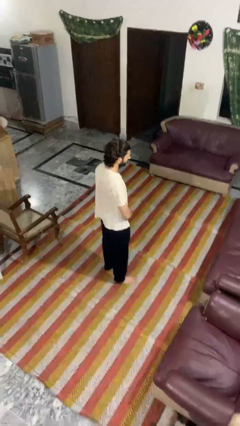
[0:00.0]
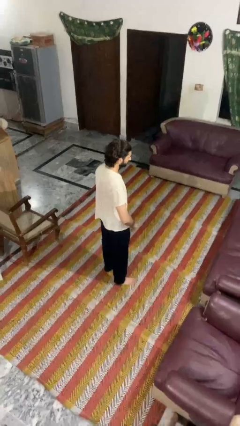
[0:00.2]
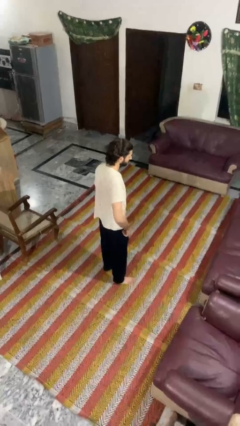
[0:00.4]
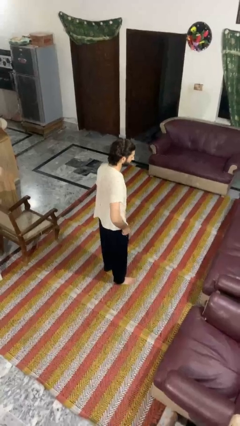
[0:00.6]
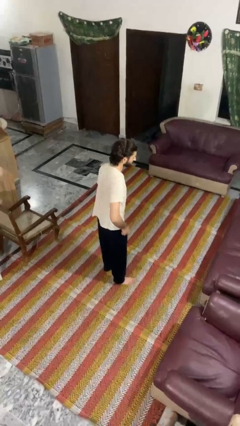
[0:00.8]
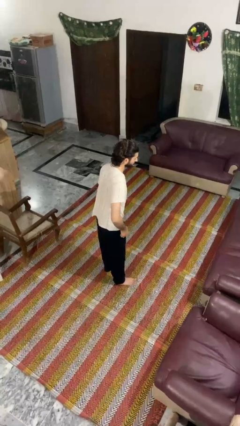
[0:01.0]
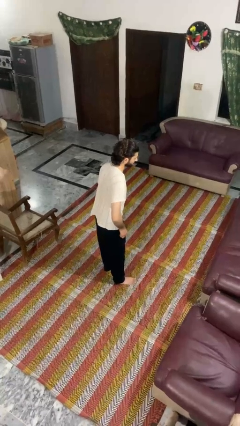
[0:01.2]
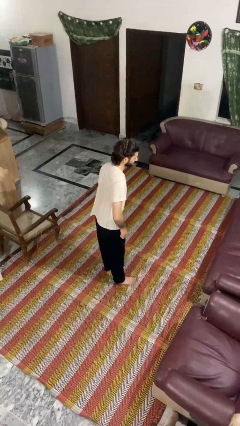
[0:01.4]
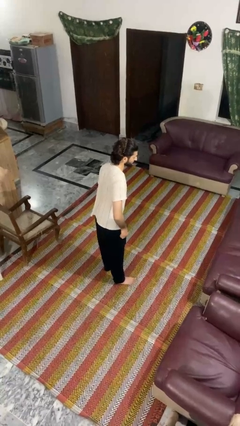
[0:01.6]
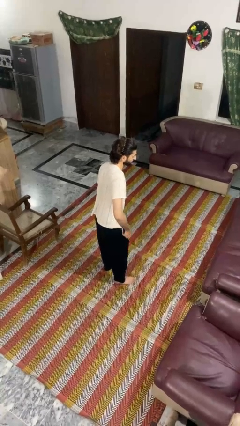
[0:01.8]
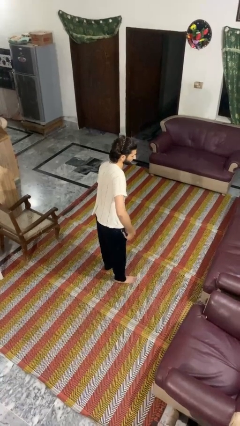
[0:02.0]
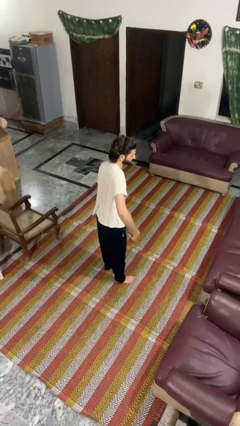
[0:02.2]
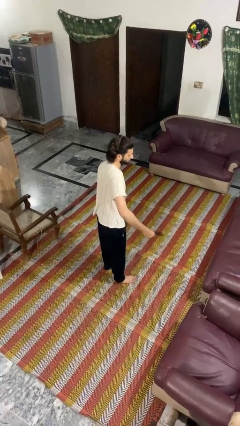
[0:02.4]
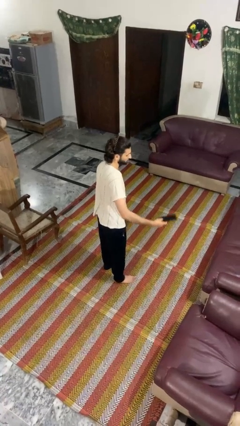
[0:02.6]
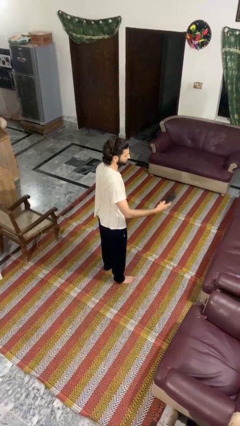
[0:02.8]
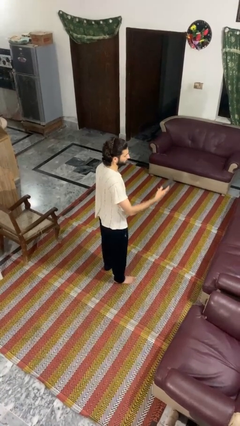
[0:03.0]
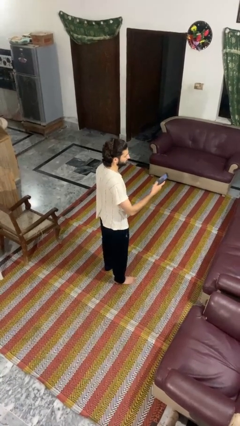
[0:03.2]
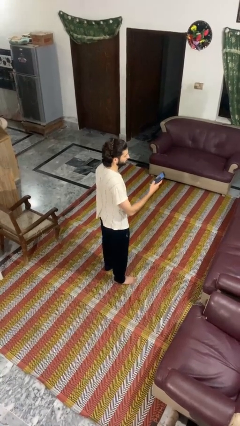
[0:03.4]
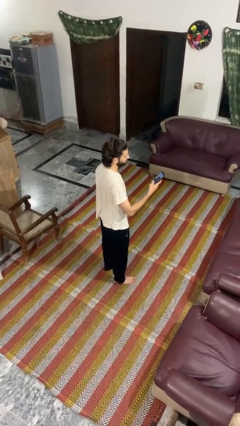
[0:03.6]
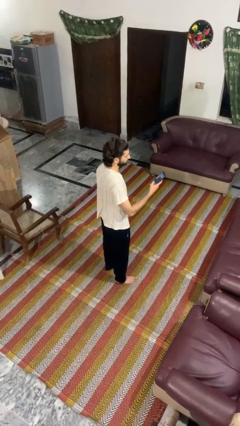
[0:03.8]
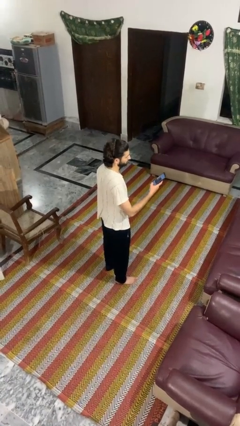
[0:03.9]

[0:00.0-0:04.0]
person takes phone from pocket

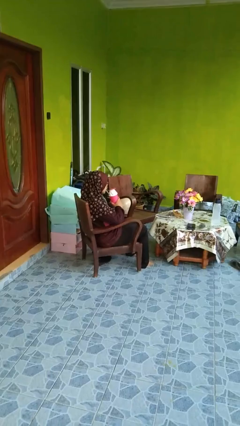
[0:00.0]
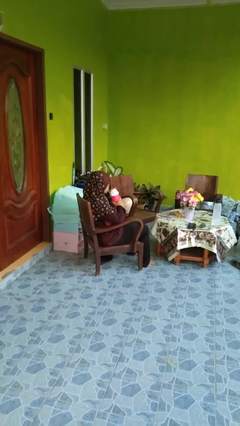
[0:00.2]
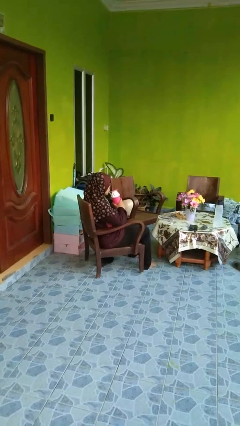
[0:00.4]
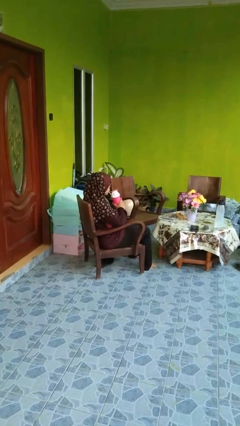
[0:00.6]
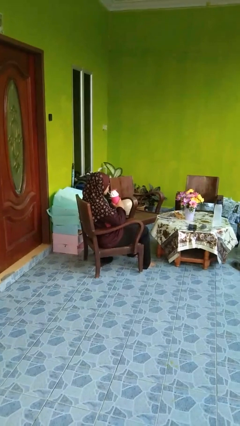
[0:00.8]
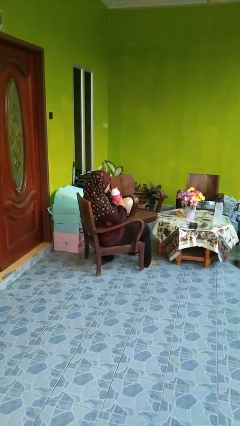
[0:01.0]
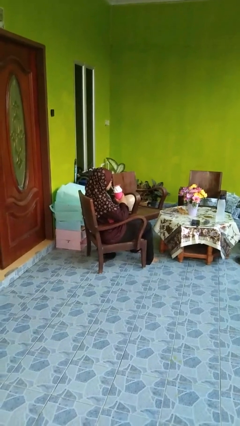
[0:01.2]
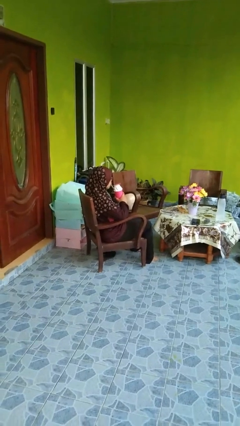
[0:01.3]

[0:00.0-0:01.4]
person drinks from straw

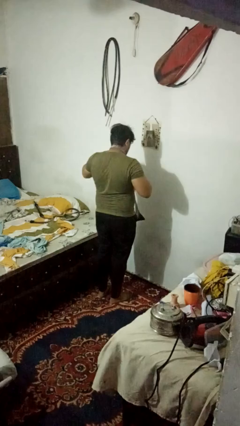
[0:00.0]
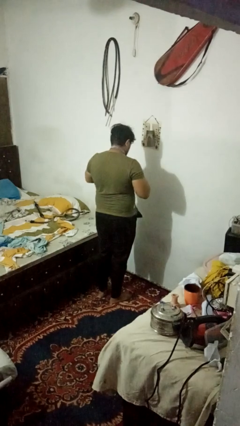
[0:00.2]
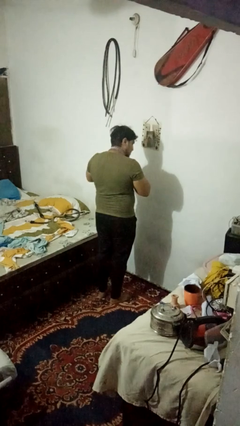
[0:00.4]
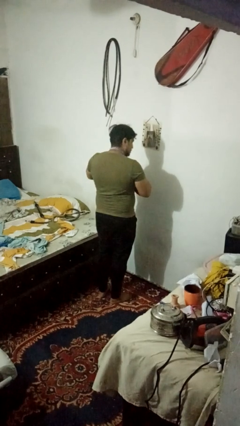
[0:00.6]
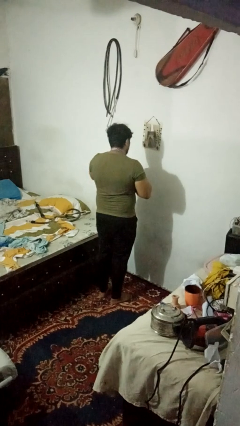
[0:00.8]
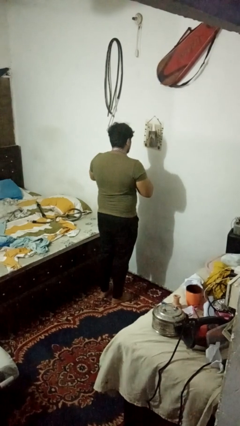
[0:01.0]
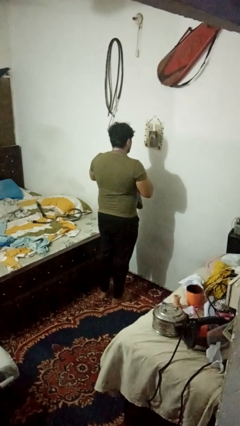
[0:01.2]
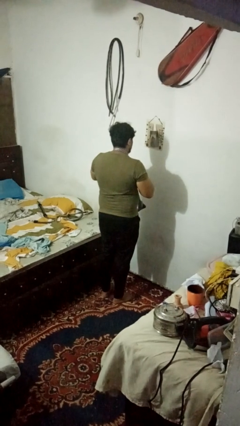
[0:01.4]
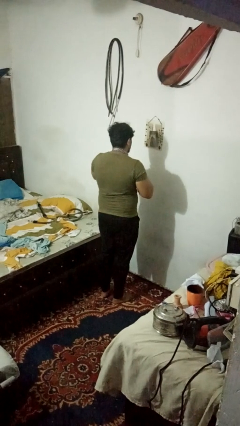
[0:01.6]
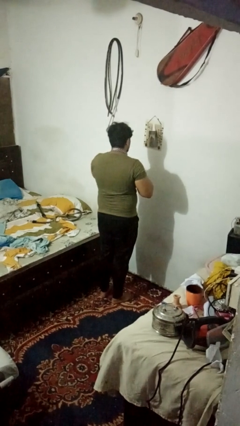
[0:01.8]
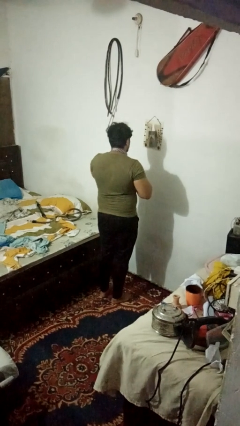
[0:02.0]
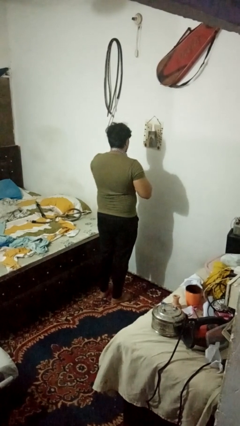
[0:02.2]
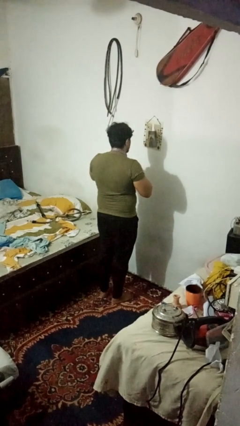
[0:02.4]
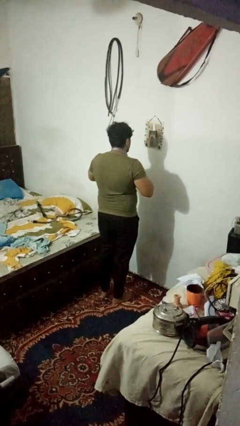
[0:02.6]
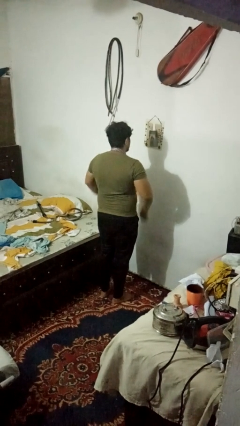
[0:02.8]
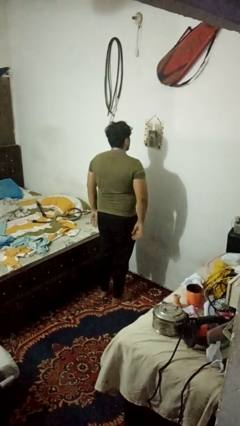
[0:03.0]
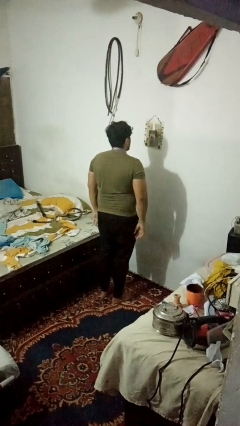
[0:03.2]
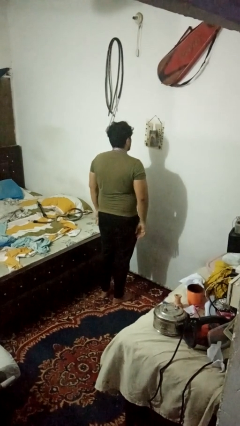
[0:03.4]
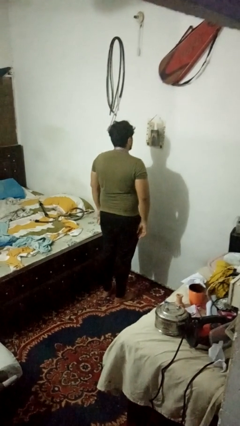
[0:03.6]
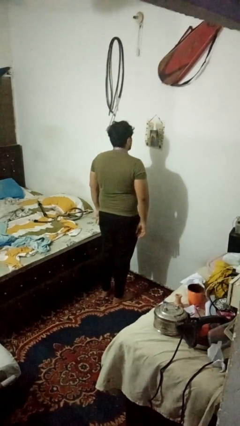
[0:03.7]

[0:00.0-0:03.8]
person puts on necktie

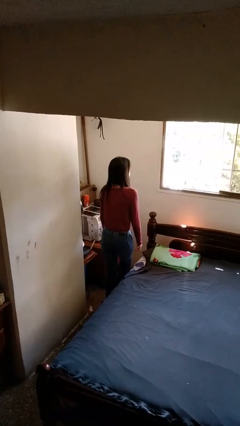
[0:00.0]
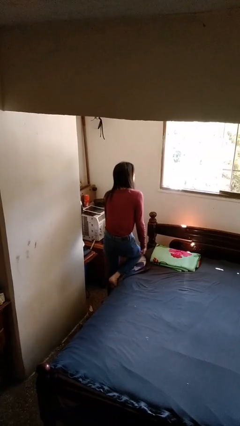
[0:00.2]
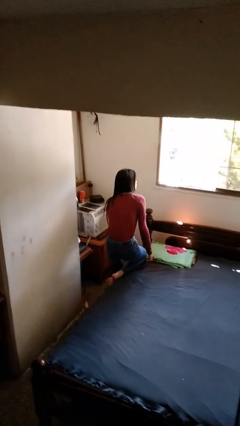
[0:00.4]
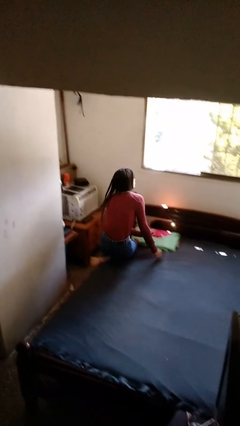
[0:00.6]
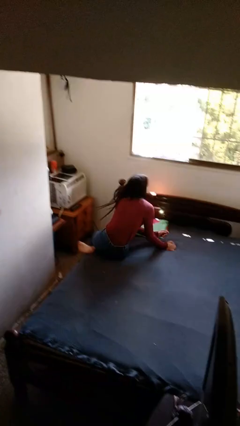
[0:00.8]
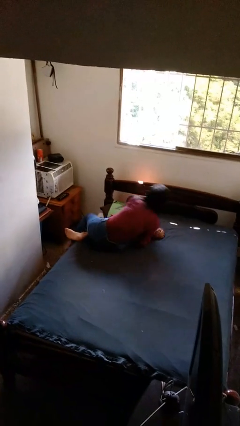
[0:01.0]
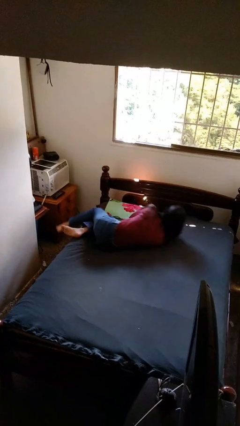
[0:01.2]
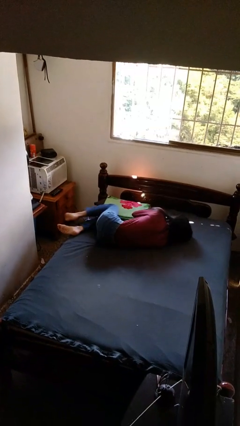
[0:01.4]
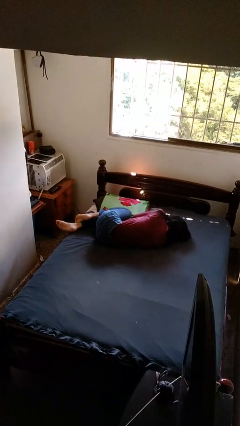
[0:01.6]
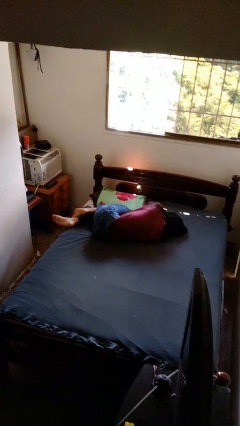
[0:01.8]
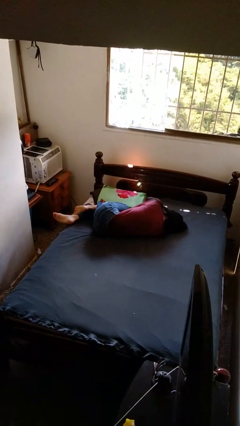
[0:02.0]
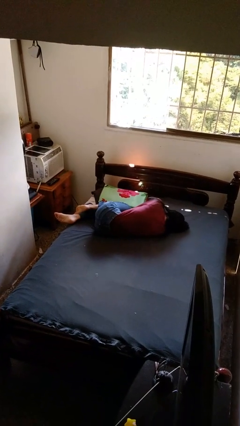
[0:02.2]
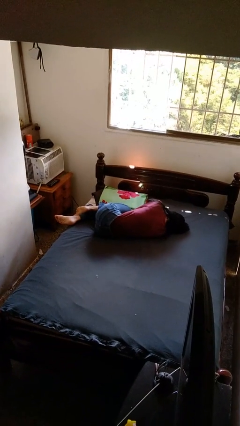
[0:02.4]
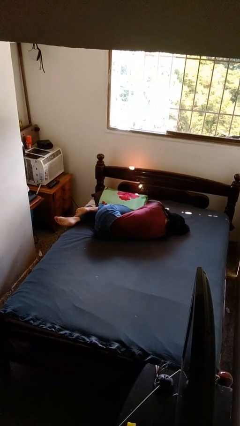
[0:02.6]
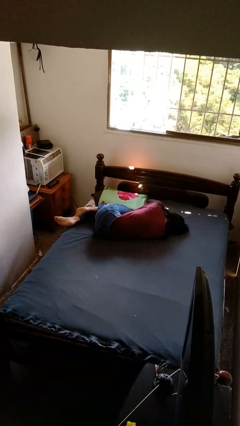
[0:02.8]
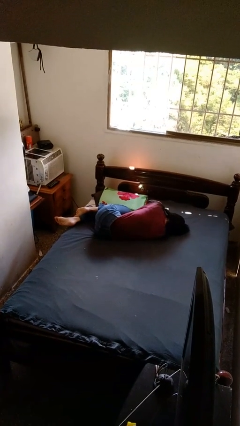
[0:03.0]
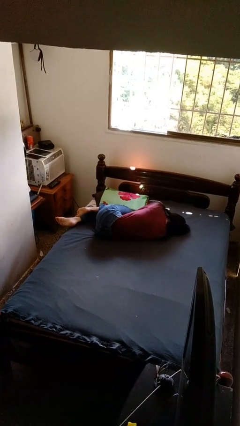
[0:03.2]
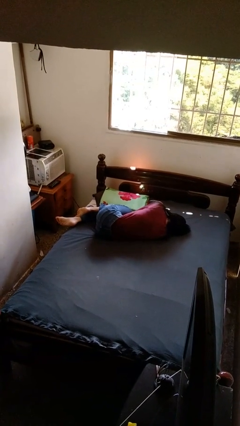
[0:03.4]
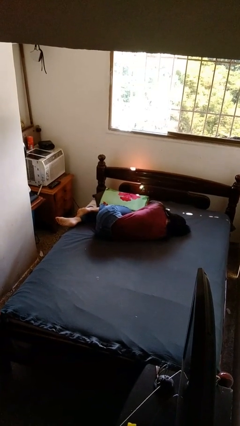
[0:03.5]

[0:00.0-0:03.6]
person lies down on bed

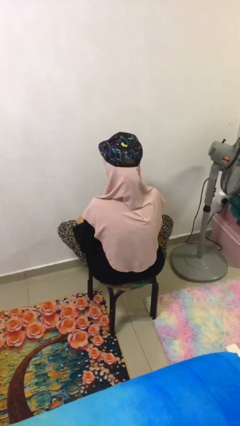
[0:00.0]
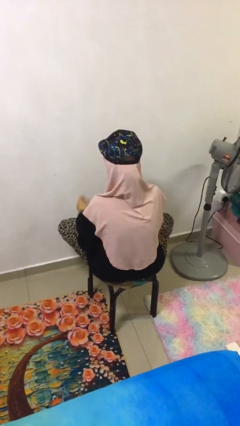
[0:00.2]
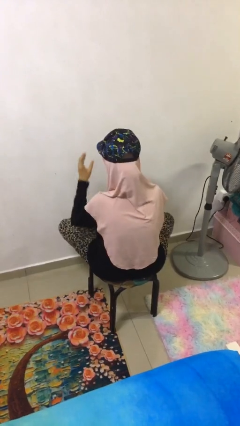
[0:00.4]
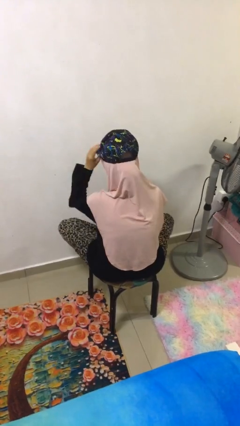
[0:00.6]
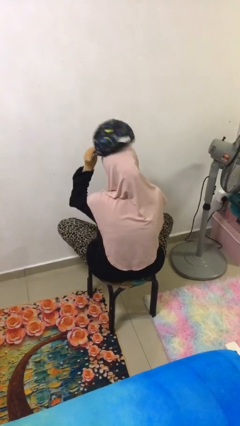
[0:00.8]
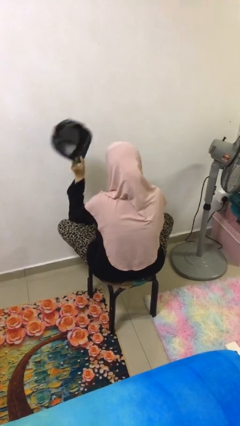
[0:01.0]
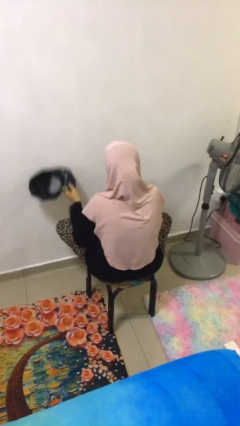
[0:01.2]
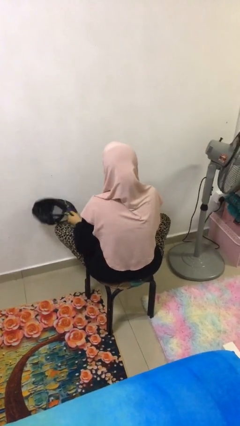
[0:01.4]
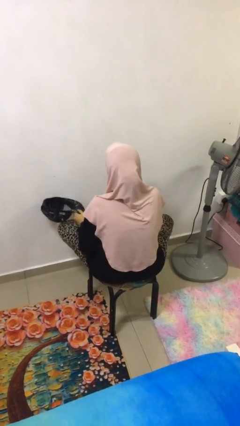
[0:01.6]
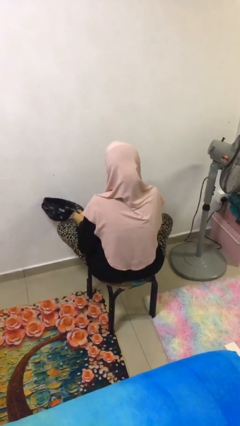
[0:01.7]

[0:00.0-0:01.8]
person takes off hat

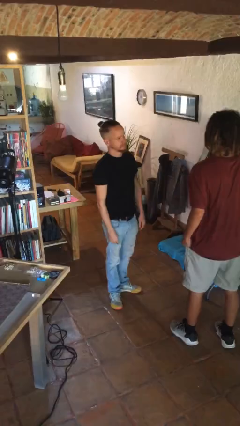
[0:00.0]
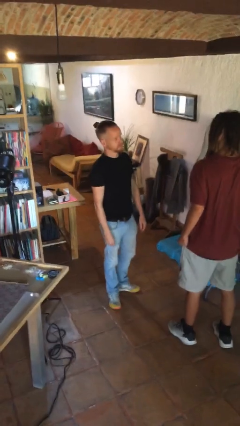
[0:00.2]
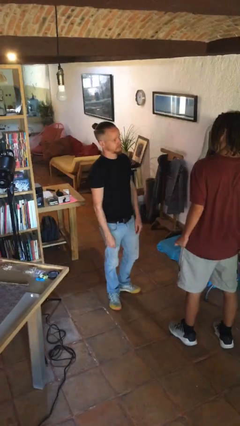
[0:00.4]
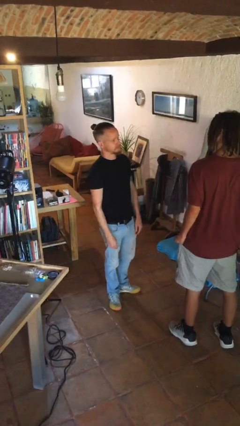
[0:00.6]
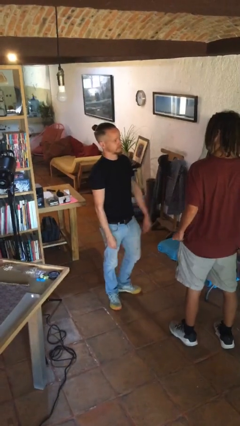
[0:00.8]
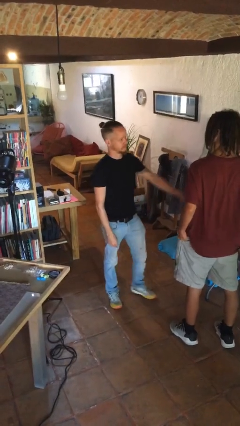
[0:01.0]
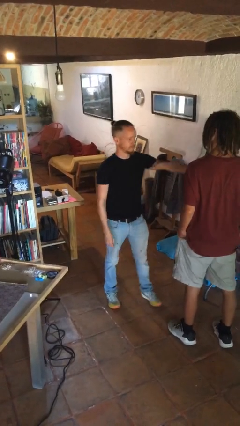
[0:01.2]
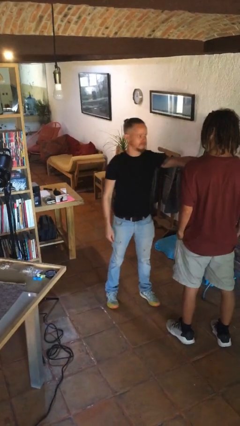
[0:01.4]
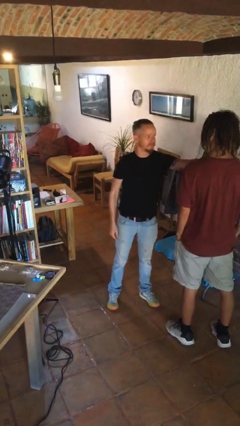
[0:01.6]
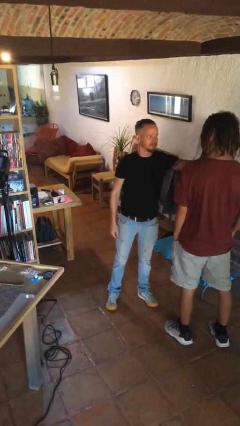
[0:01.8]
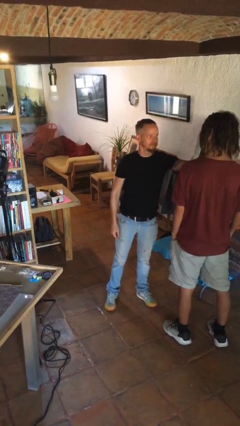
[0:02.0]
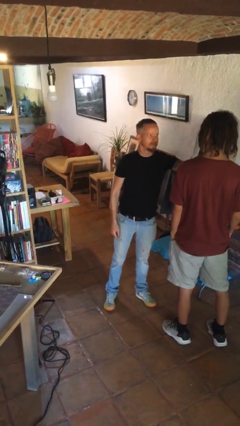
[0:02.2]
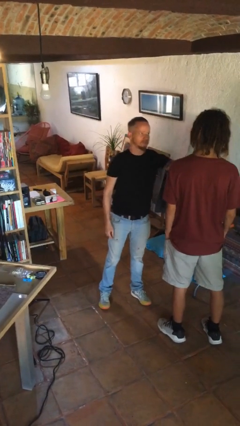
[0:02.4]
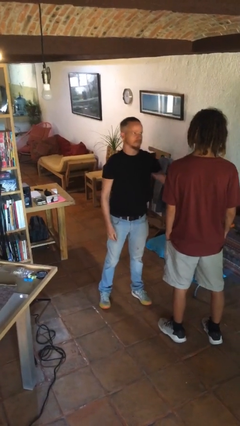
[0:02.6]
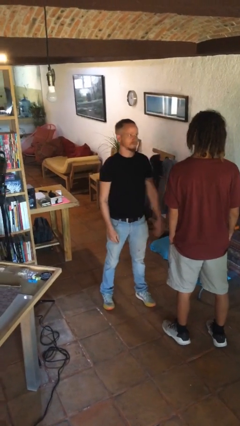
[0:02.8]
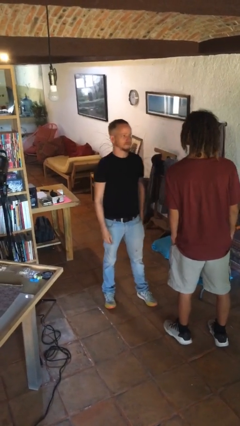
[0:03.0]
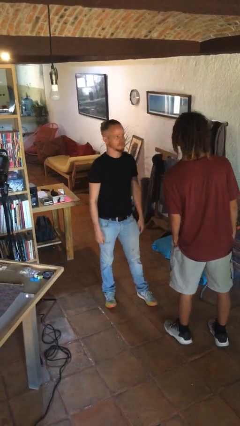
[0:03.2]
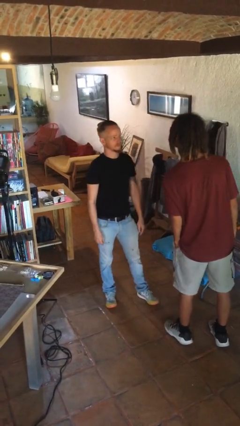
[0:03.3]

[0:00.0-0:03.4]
person pounds shoulders of person
